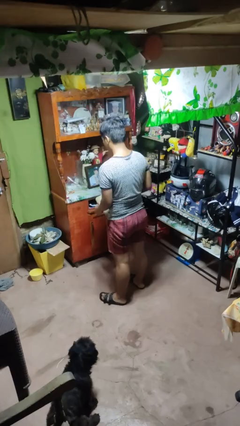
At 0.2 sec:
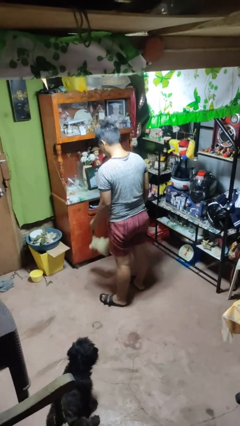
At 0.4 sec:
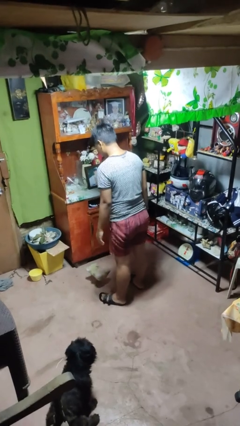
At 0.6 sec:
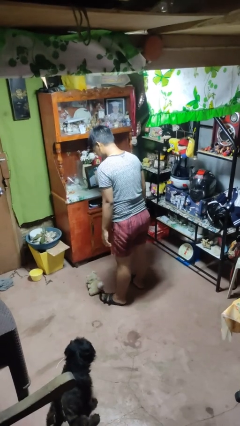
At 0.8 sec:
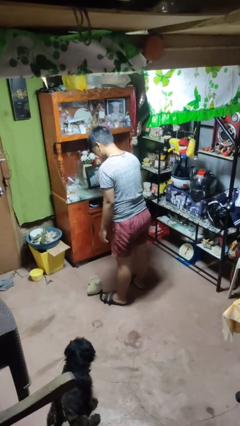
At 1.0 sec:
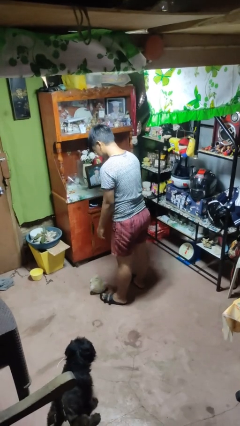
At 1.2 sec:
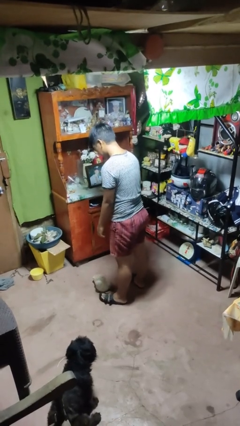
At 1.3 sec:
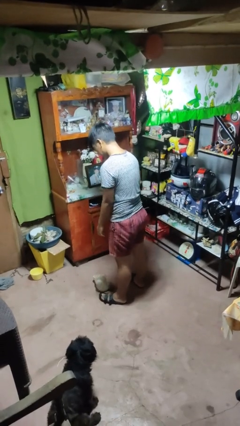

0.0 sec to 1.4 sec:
person drops object

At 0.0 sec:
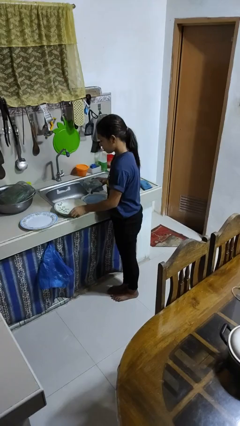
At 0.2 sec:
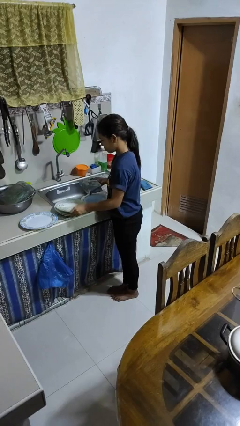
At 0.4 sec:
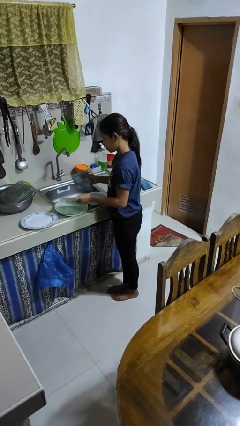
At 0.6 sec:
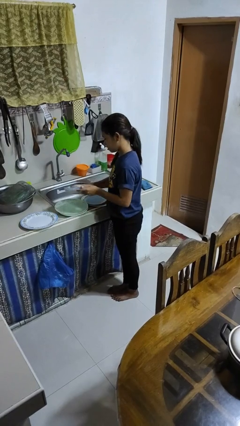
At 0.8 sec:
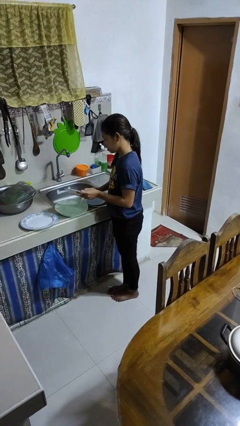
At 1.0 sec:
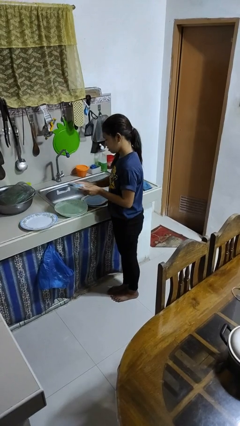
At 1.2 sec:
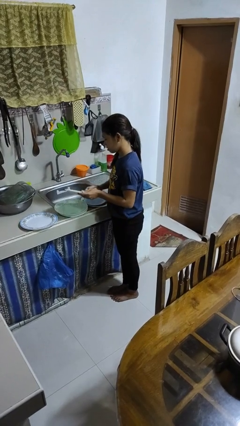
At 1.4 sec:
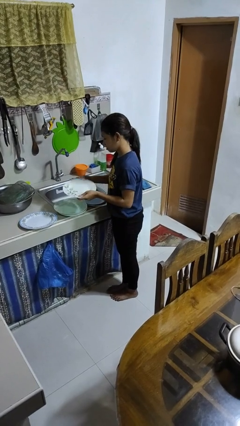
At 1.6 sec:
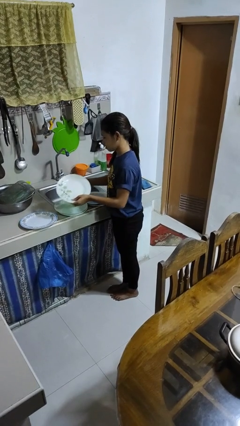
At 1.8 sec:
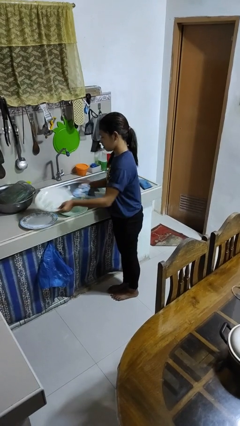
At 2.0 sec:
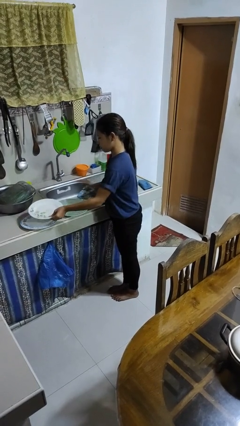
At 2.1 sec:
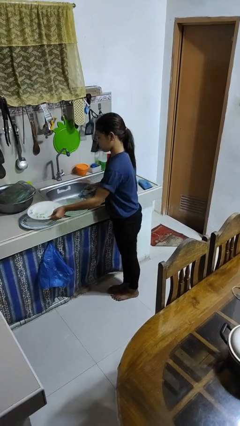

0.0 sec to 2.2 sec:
person dries dish

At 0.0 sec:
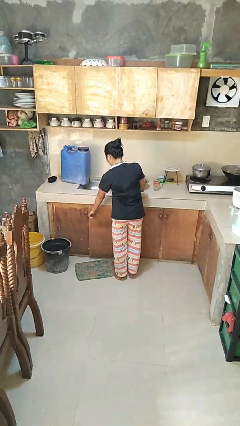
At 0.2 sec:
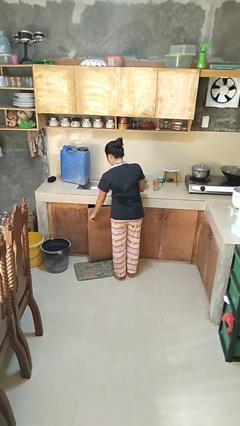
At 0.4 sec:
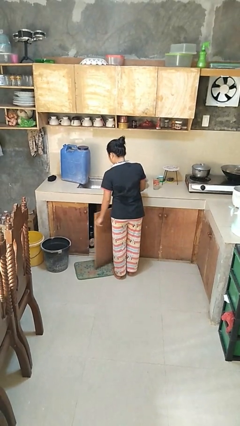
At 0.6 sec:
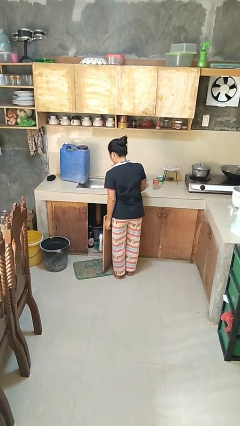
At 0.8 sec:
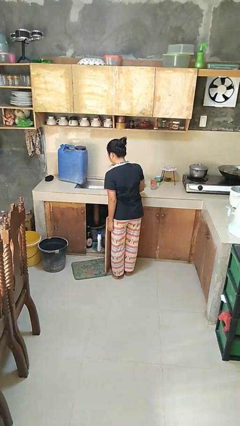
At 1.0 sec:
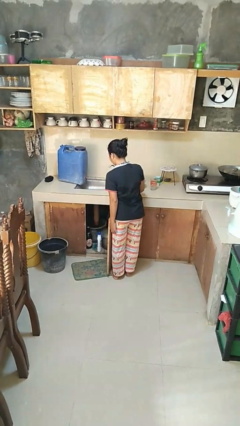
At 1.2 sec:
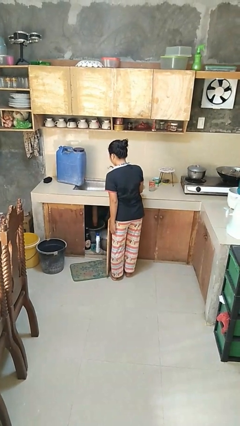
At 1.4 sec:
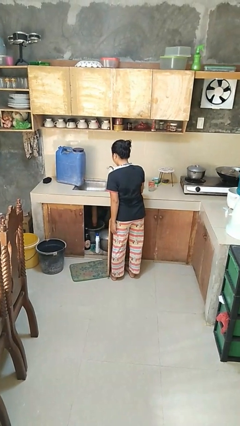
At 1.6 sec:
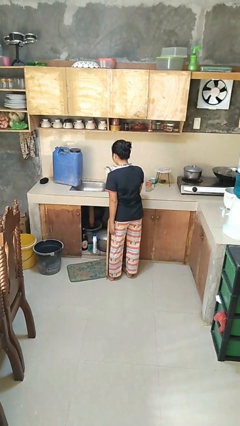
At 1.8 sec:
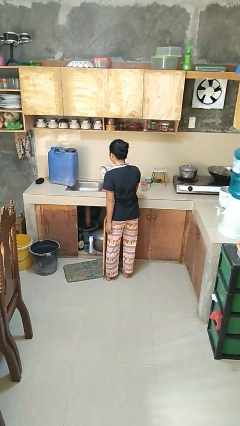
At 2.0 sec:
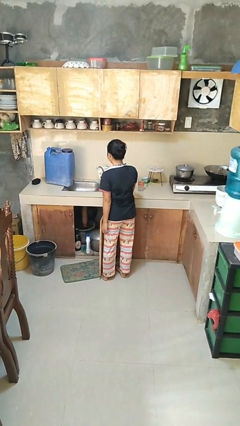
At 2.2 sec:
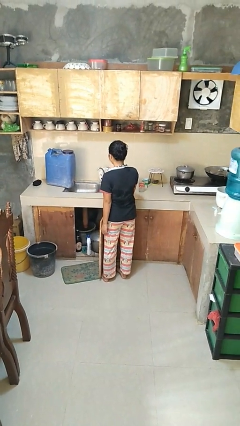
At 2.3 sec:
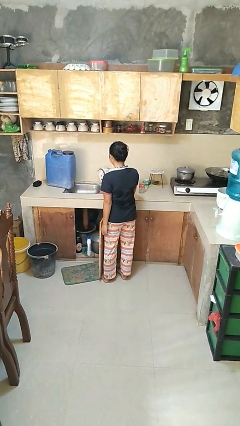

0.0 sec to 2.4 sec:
person opens cabinet

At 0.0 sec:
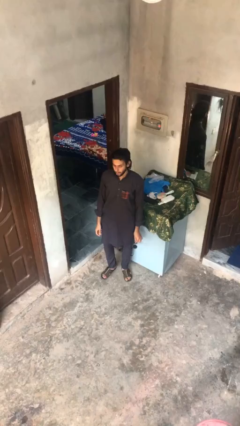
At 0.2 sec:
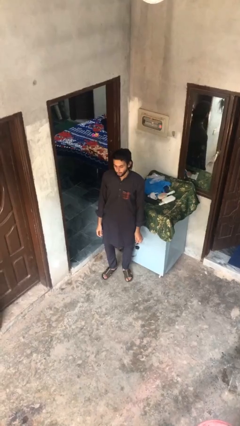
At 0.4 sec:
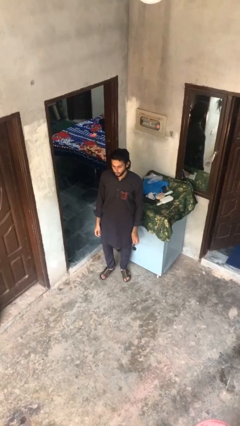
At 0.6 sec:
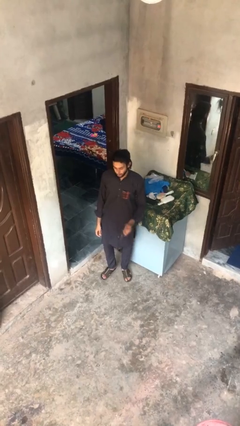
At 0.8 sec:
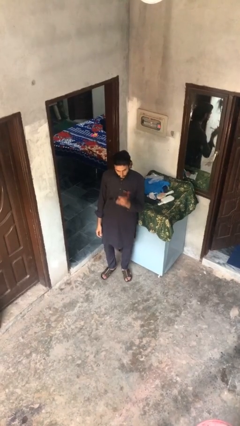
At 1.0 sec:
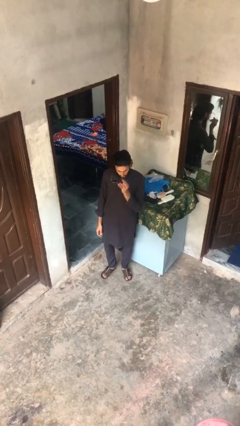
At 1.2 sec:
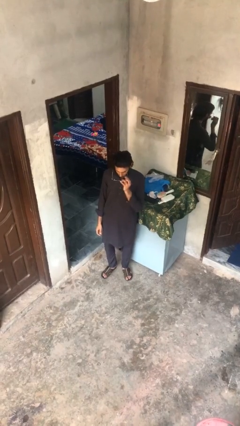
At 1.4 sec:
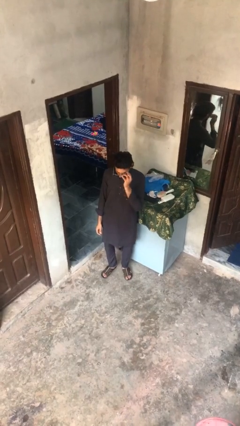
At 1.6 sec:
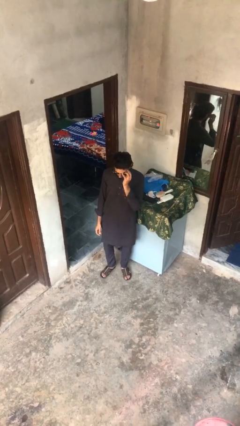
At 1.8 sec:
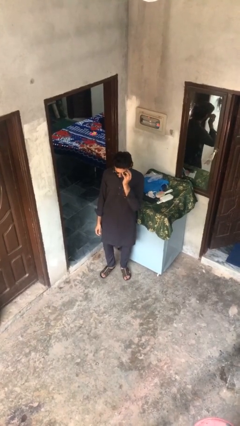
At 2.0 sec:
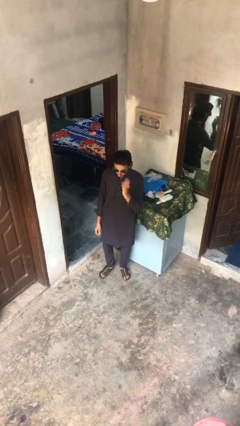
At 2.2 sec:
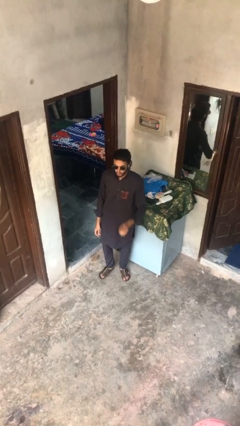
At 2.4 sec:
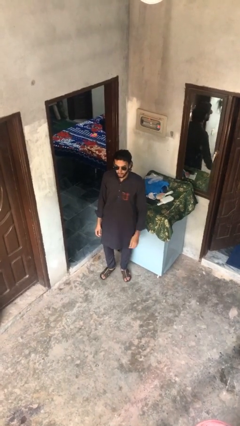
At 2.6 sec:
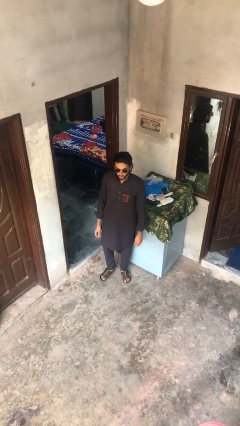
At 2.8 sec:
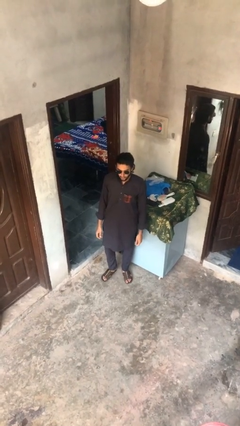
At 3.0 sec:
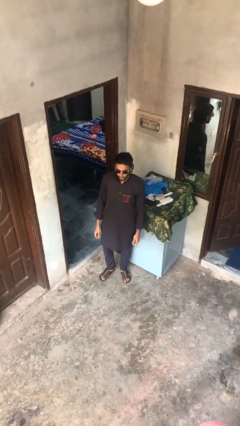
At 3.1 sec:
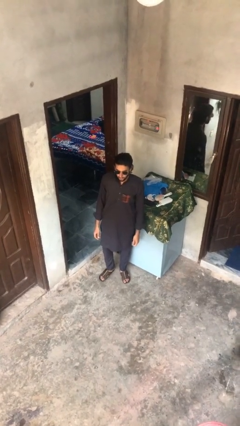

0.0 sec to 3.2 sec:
person puts on sunglasses

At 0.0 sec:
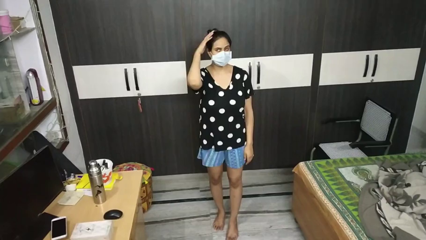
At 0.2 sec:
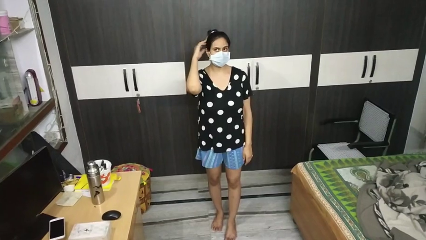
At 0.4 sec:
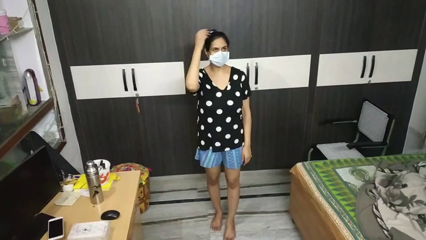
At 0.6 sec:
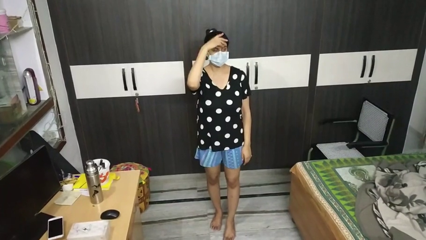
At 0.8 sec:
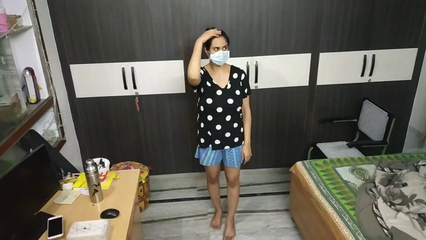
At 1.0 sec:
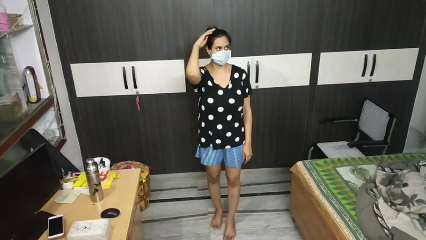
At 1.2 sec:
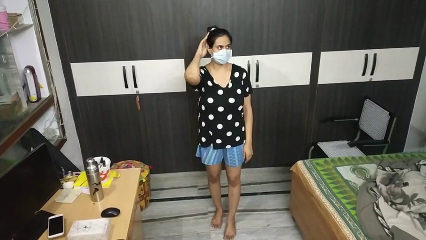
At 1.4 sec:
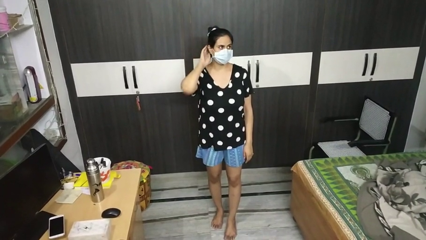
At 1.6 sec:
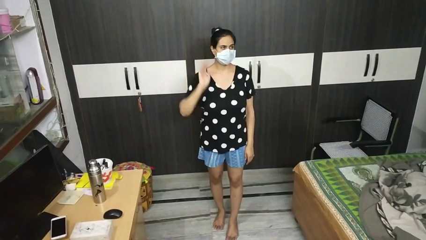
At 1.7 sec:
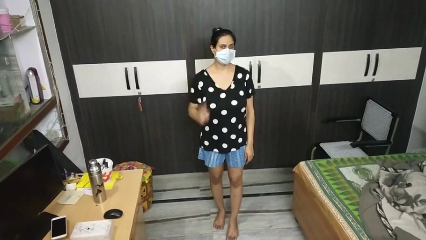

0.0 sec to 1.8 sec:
person pats head

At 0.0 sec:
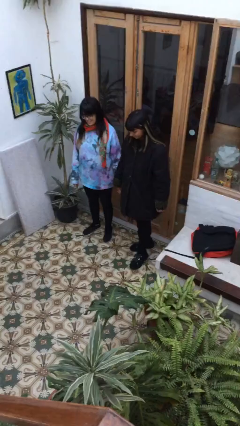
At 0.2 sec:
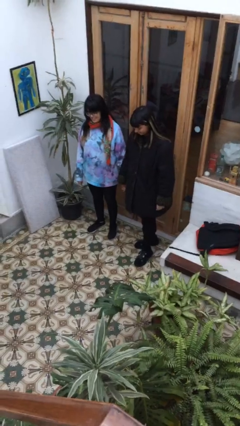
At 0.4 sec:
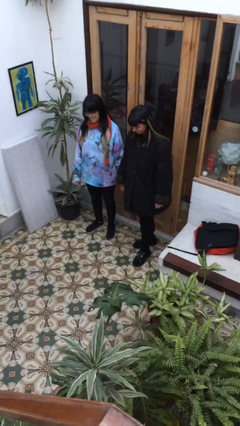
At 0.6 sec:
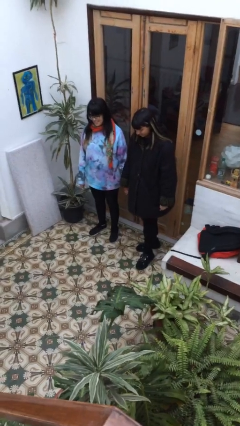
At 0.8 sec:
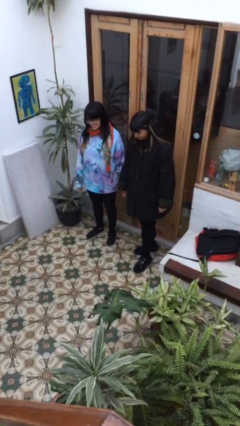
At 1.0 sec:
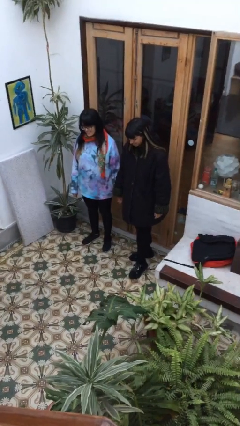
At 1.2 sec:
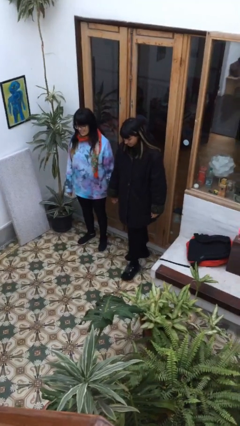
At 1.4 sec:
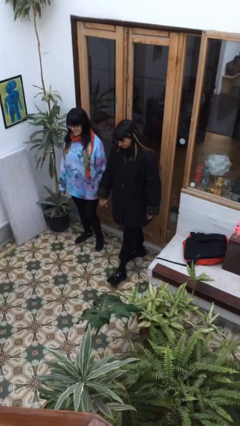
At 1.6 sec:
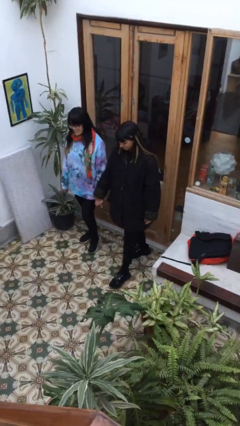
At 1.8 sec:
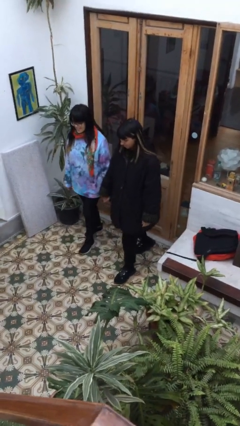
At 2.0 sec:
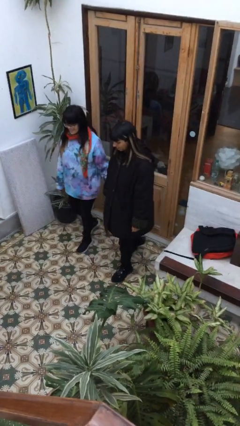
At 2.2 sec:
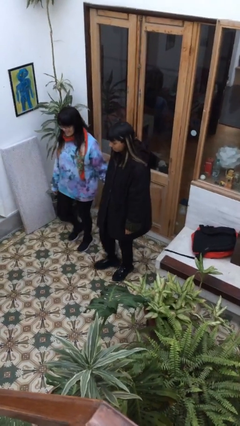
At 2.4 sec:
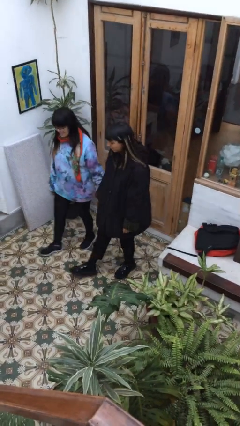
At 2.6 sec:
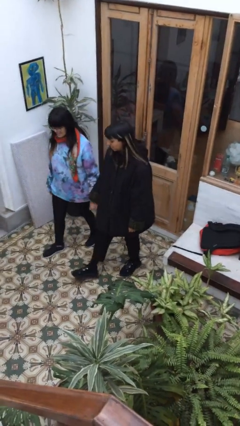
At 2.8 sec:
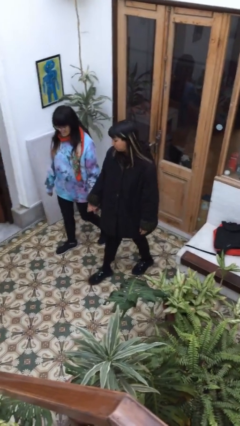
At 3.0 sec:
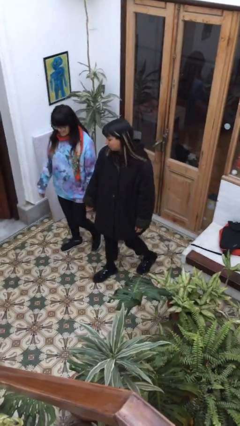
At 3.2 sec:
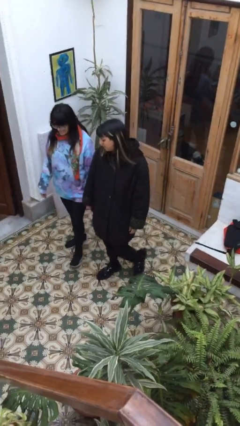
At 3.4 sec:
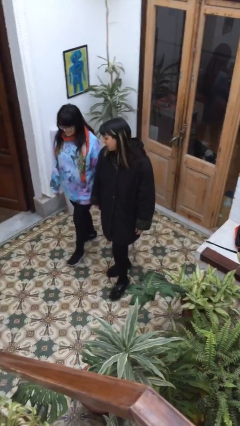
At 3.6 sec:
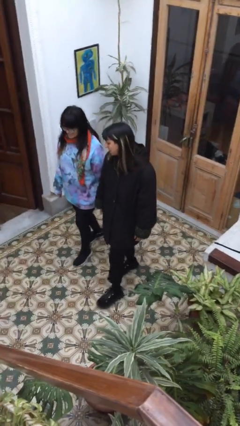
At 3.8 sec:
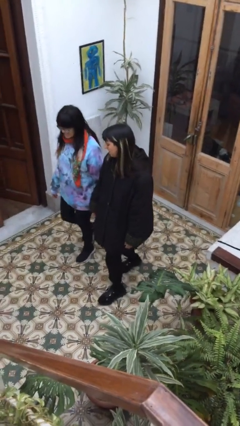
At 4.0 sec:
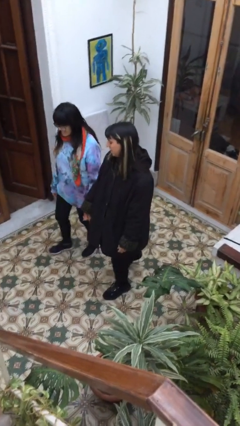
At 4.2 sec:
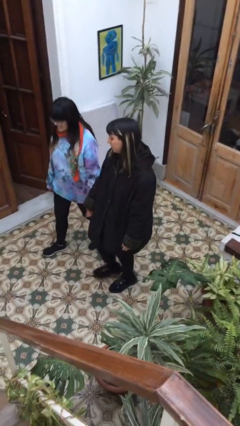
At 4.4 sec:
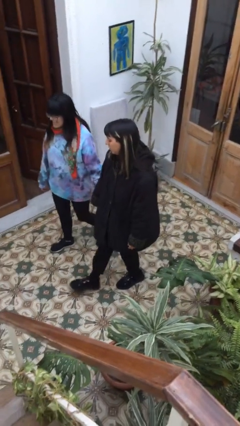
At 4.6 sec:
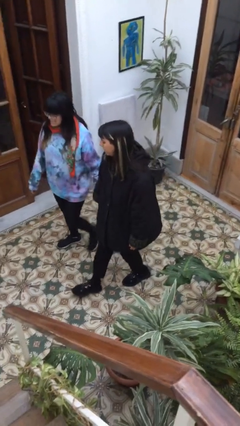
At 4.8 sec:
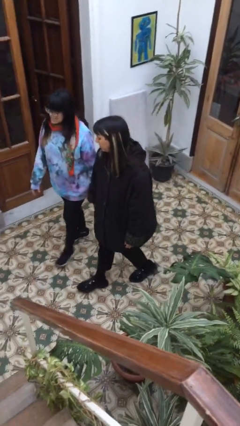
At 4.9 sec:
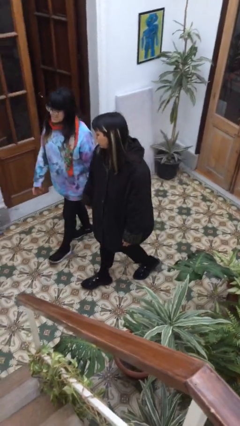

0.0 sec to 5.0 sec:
person holds hand

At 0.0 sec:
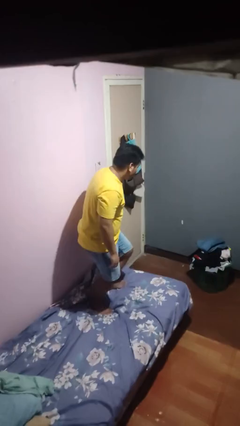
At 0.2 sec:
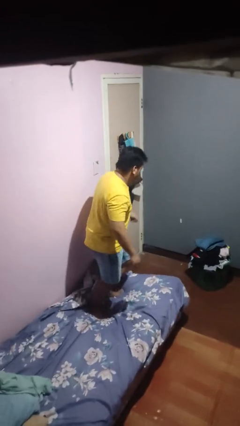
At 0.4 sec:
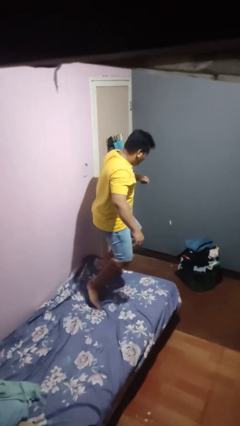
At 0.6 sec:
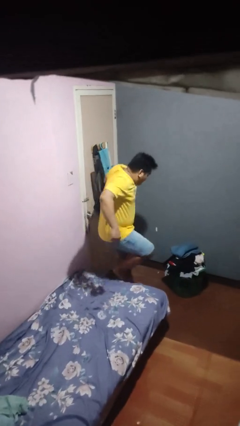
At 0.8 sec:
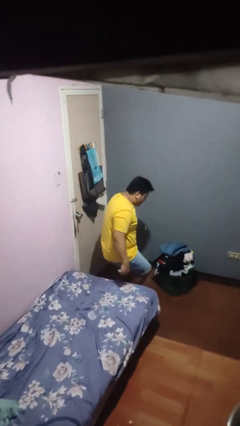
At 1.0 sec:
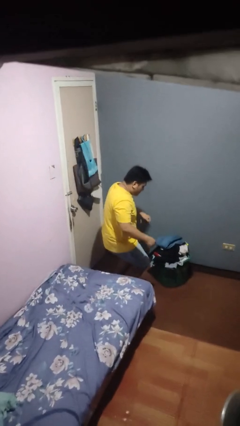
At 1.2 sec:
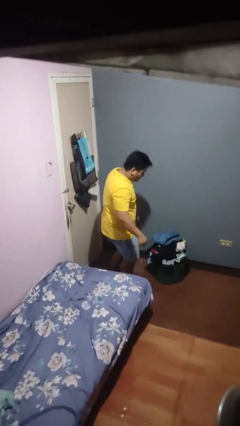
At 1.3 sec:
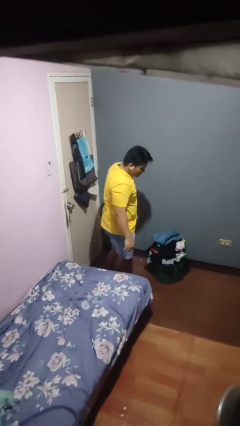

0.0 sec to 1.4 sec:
person jumps on bed
